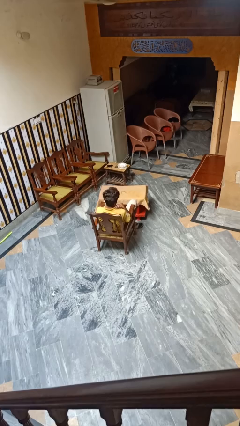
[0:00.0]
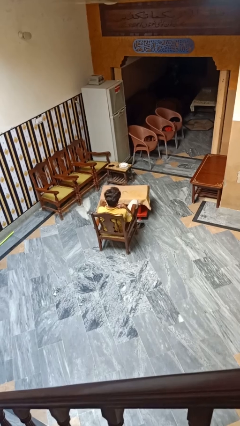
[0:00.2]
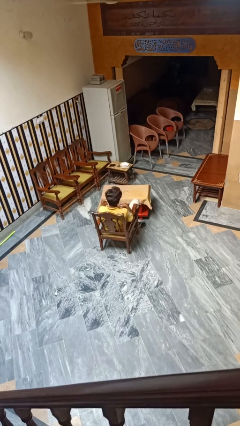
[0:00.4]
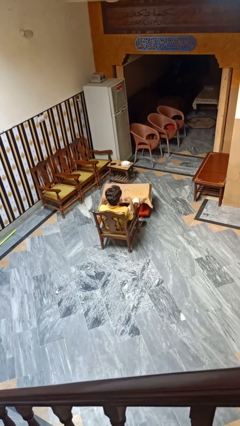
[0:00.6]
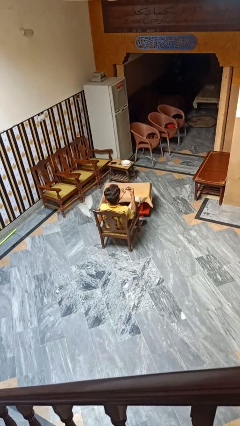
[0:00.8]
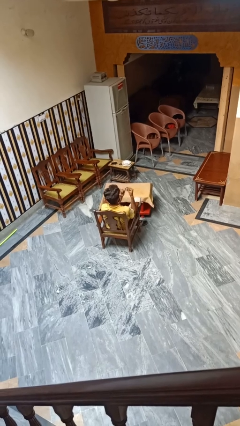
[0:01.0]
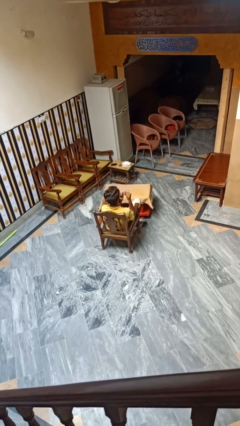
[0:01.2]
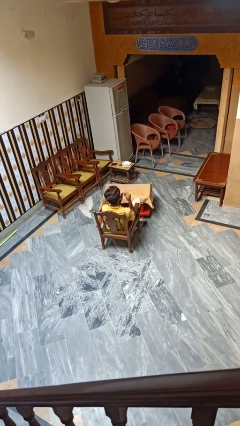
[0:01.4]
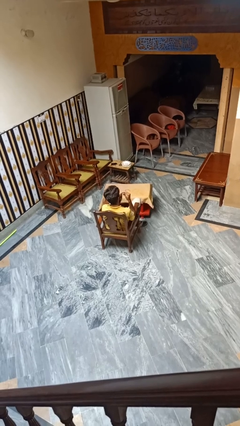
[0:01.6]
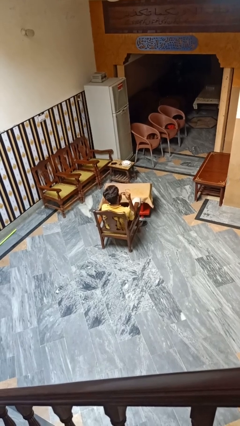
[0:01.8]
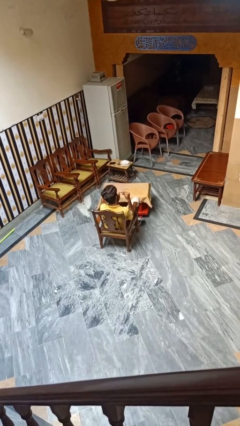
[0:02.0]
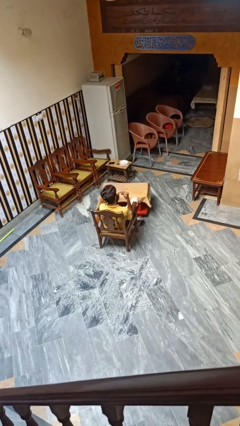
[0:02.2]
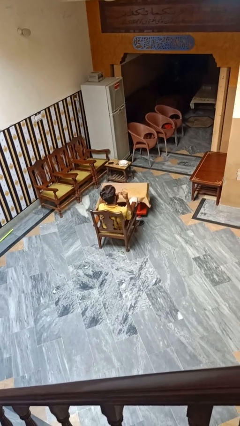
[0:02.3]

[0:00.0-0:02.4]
person clips fingernails

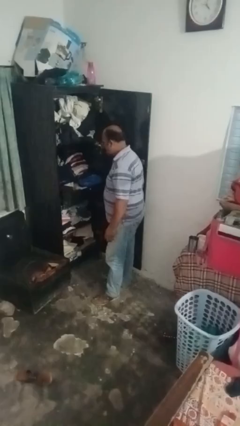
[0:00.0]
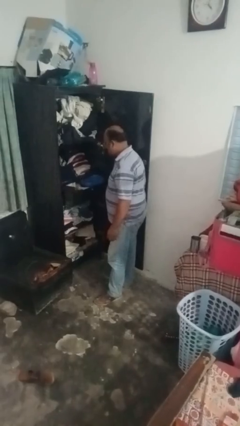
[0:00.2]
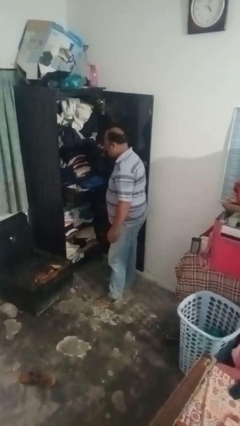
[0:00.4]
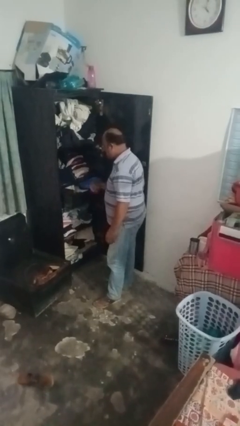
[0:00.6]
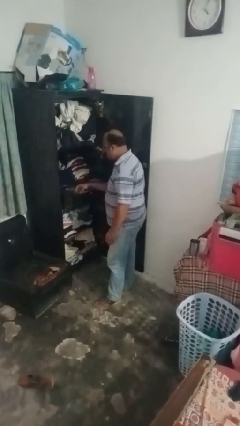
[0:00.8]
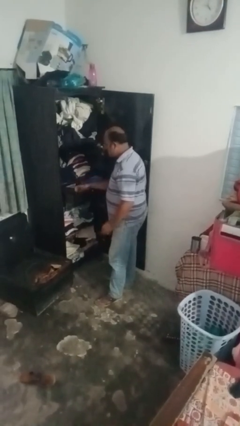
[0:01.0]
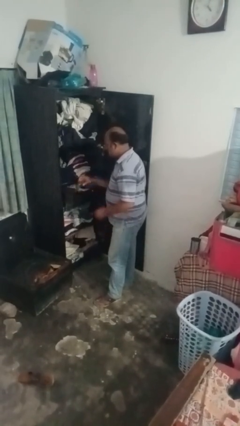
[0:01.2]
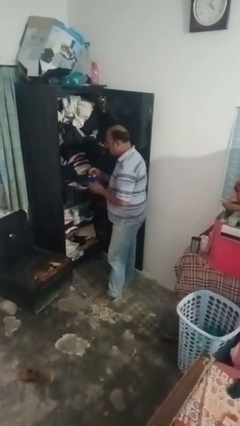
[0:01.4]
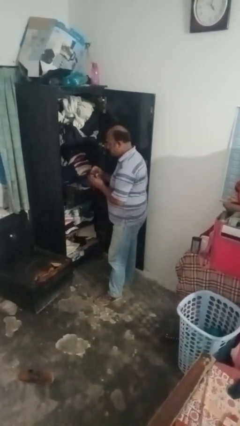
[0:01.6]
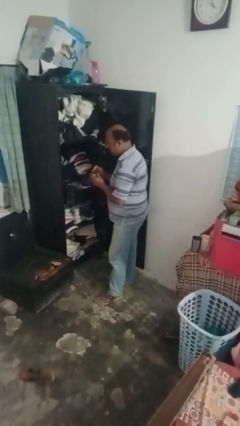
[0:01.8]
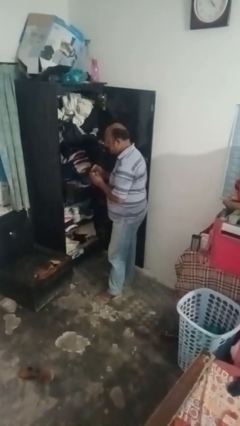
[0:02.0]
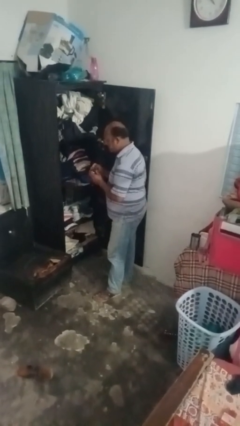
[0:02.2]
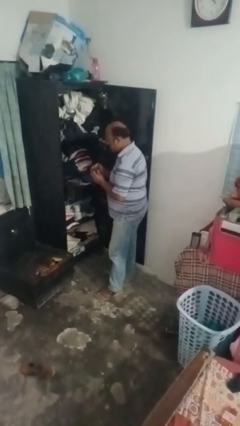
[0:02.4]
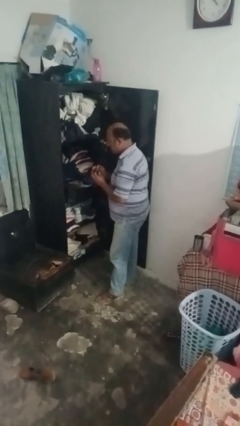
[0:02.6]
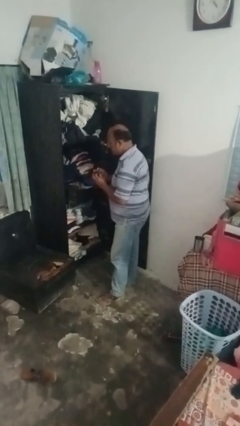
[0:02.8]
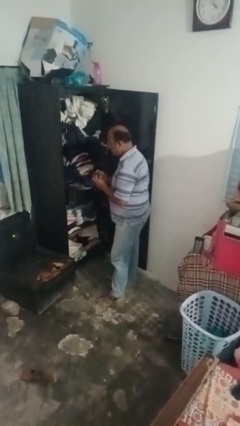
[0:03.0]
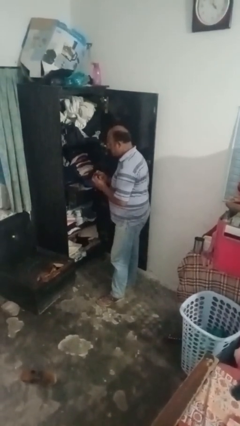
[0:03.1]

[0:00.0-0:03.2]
person puts clothes into dresser

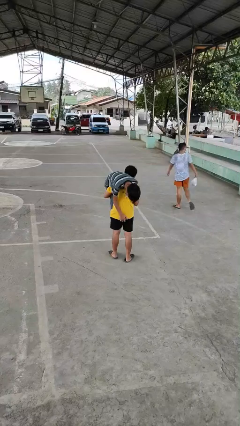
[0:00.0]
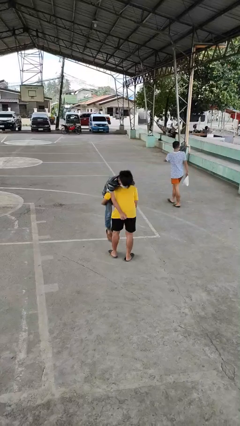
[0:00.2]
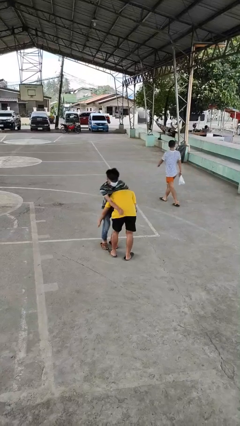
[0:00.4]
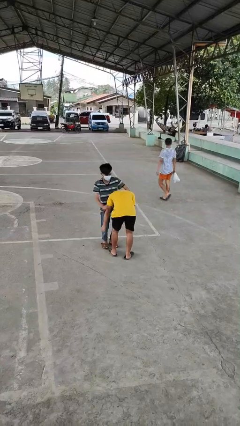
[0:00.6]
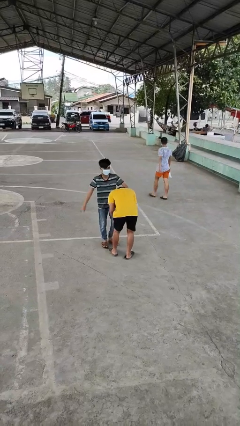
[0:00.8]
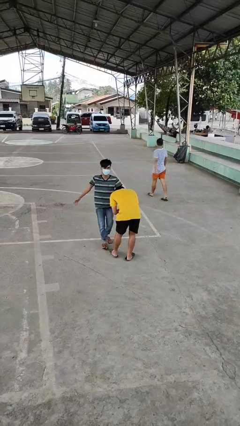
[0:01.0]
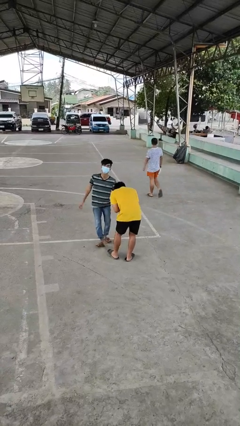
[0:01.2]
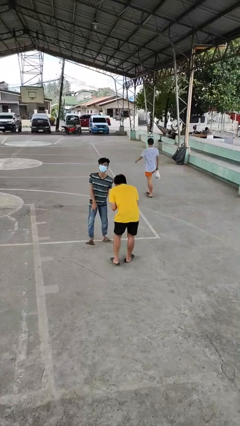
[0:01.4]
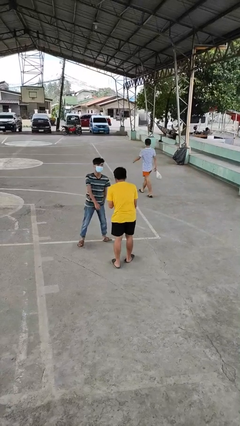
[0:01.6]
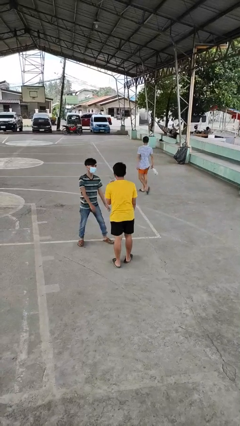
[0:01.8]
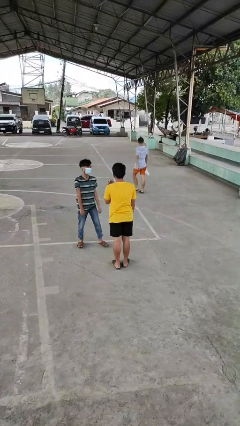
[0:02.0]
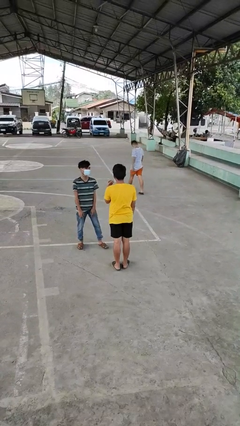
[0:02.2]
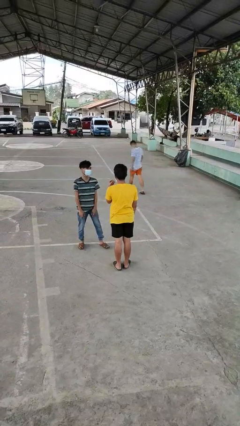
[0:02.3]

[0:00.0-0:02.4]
person puts down person

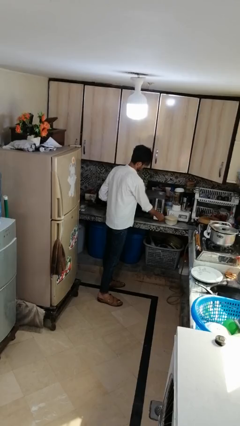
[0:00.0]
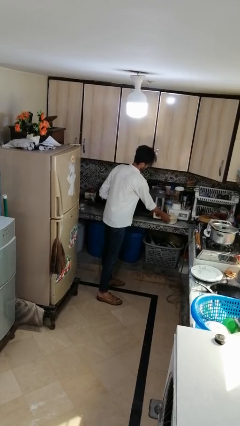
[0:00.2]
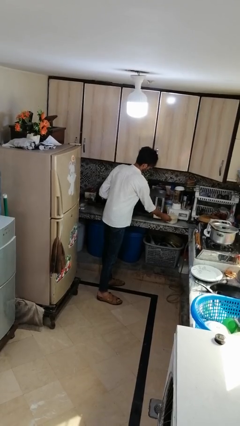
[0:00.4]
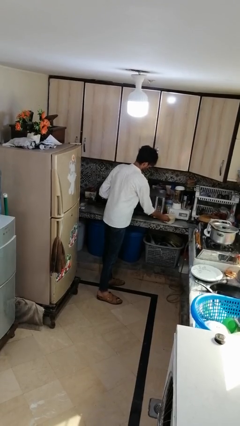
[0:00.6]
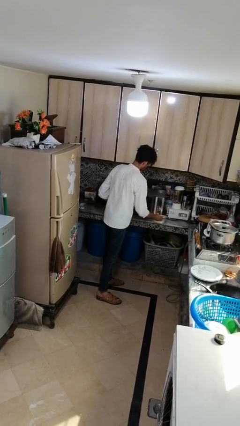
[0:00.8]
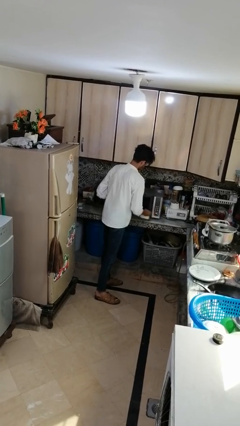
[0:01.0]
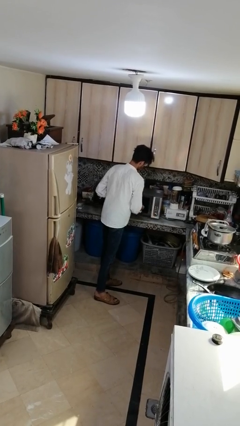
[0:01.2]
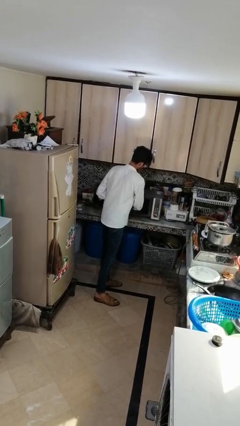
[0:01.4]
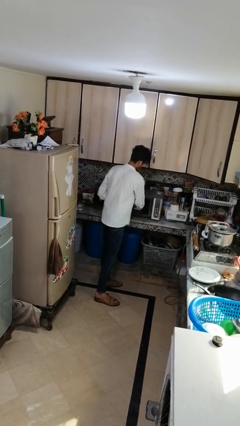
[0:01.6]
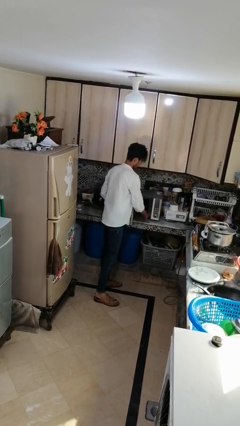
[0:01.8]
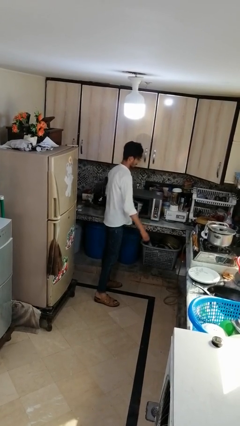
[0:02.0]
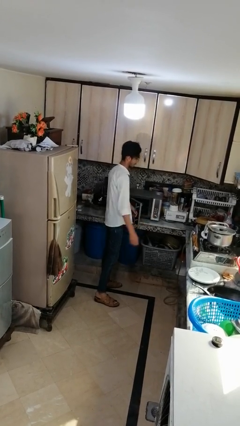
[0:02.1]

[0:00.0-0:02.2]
person puts object into microwave

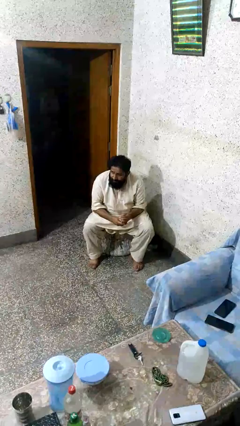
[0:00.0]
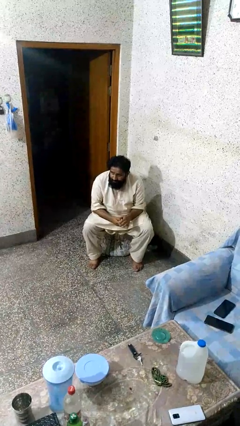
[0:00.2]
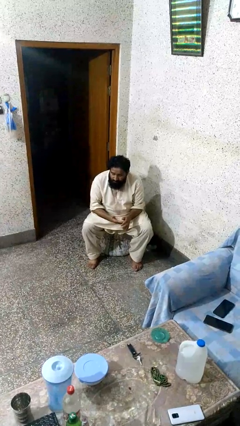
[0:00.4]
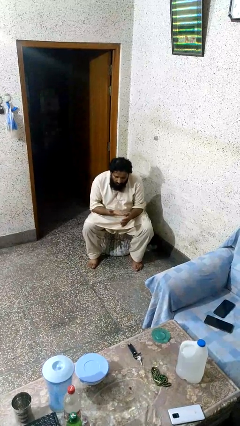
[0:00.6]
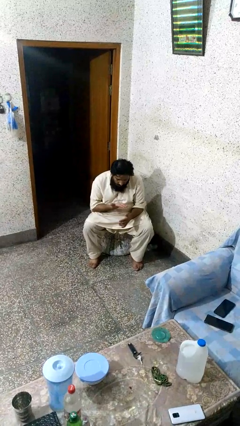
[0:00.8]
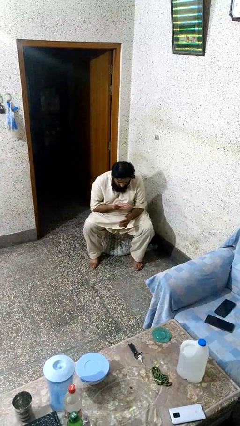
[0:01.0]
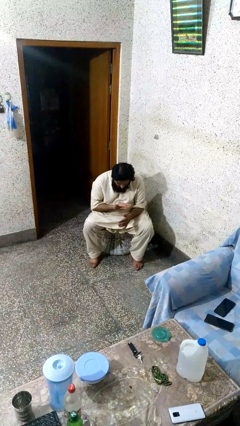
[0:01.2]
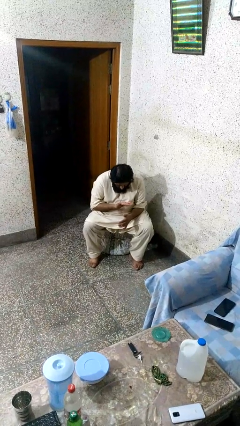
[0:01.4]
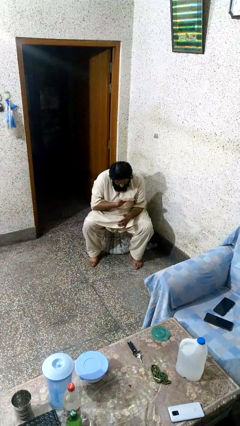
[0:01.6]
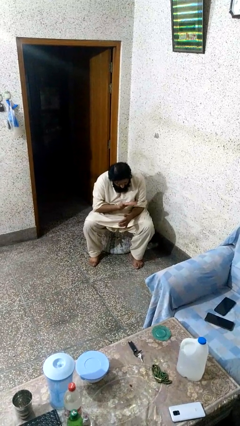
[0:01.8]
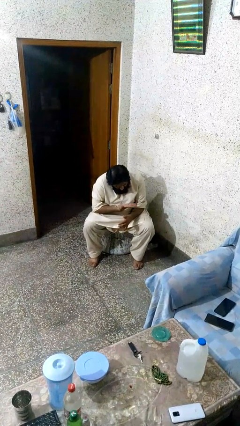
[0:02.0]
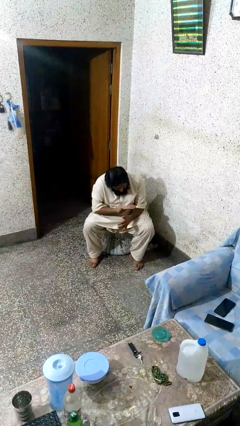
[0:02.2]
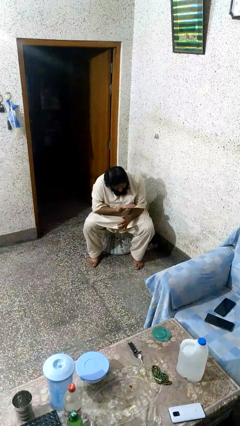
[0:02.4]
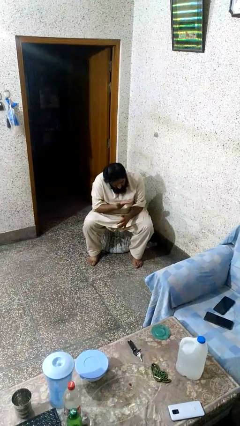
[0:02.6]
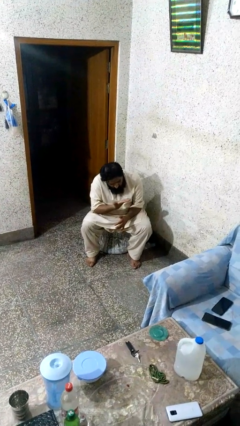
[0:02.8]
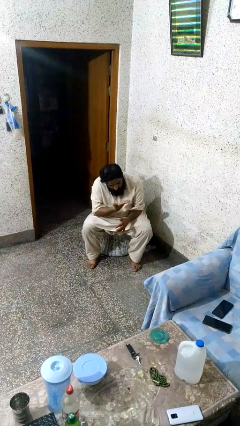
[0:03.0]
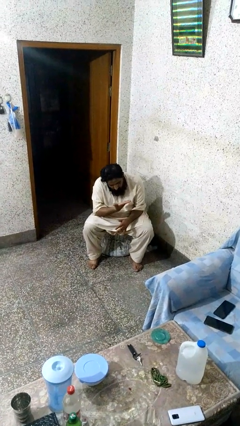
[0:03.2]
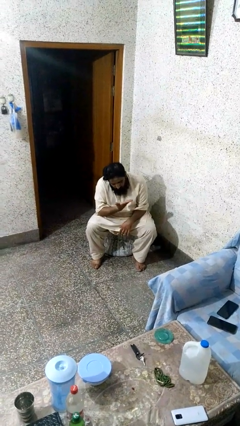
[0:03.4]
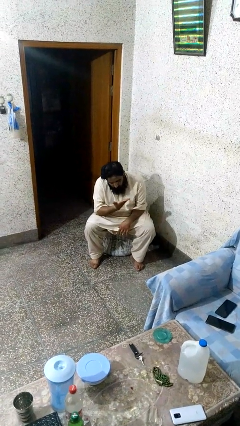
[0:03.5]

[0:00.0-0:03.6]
person looks at hands in lap

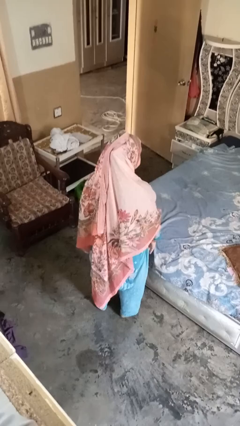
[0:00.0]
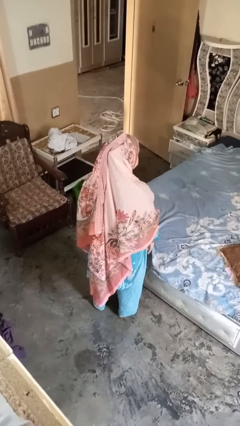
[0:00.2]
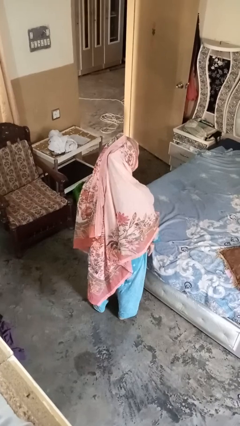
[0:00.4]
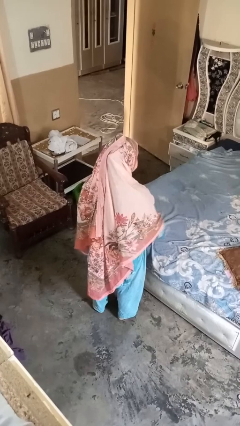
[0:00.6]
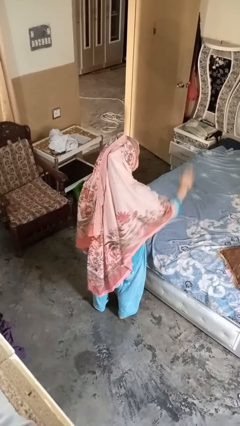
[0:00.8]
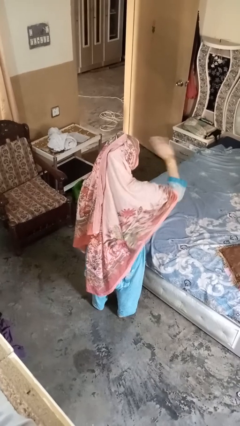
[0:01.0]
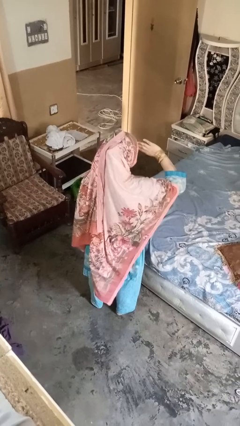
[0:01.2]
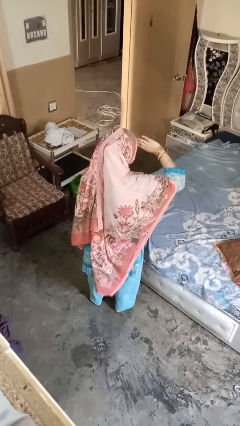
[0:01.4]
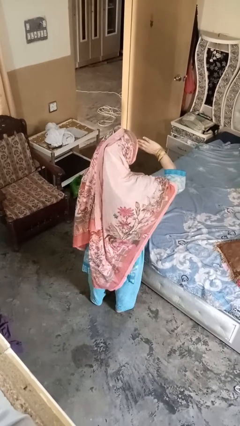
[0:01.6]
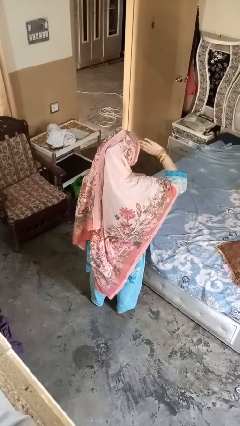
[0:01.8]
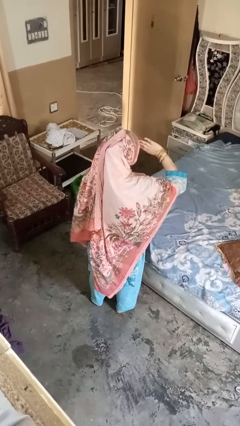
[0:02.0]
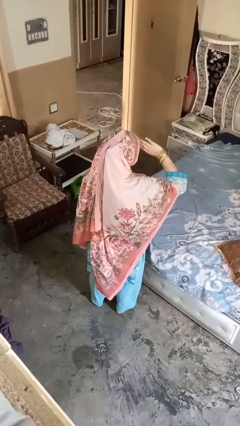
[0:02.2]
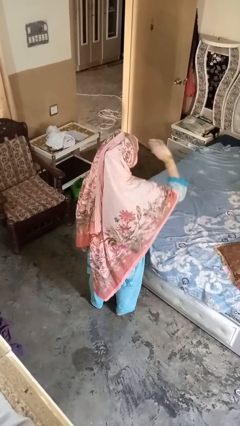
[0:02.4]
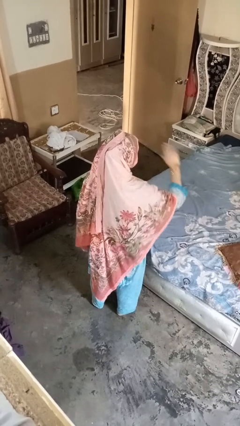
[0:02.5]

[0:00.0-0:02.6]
person salutes

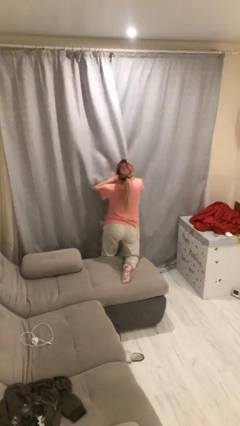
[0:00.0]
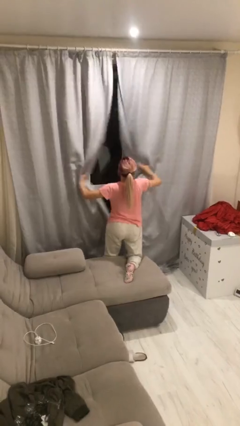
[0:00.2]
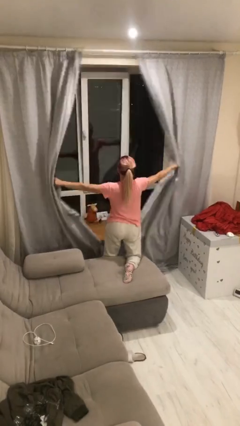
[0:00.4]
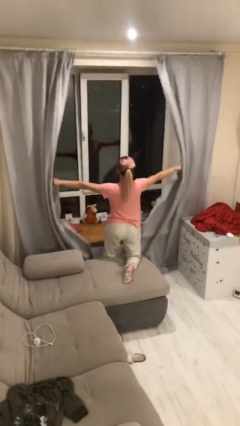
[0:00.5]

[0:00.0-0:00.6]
person opens curtains
